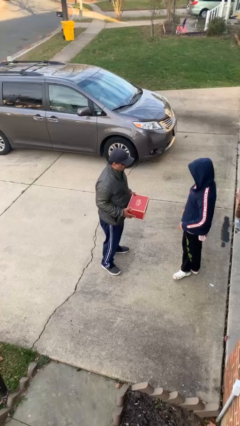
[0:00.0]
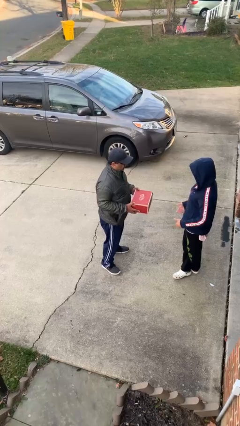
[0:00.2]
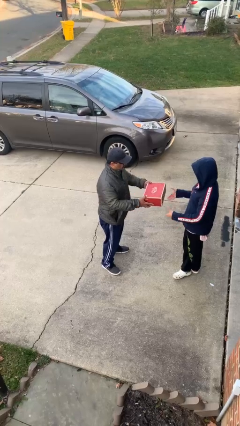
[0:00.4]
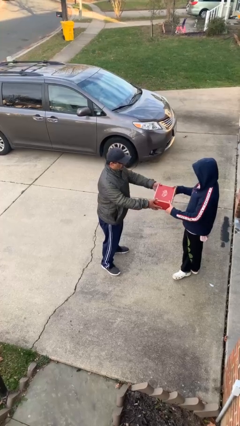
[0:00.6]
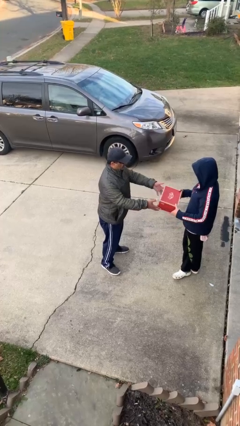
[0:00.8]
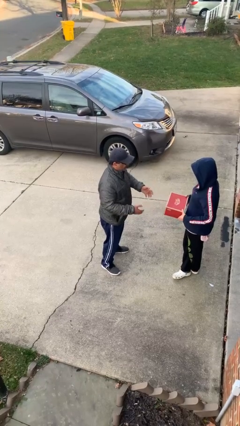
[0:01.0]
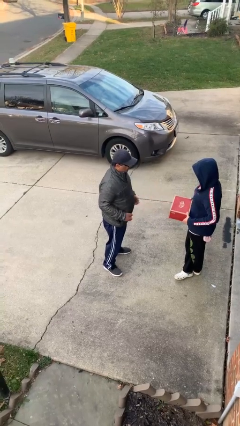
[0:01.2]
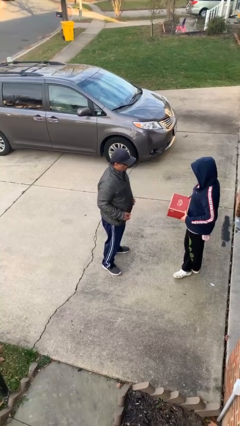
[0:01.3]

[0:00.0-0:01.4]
person transfers object to person

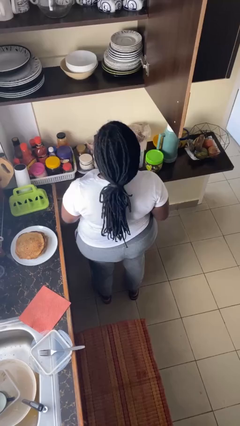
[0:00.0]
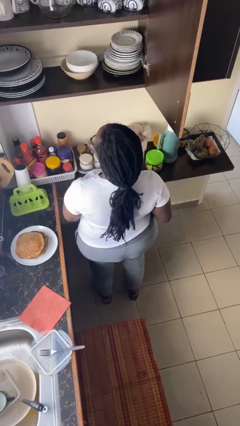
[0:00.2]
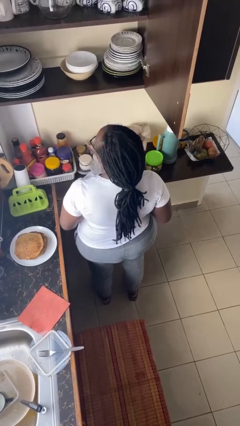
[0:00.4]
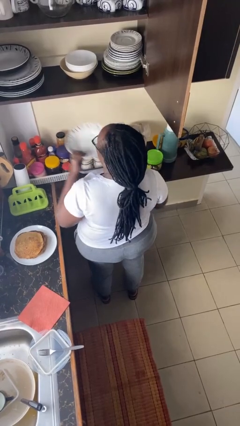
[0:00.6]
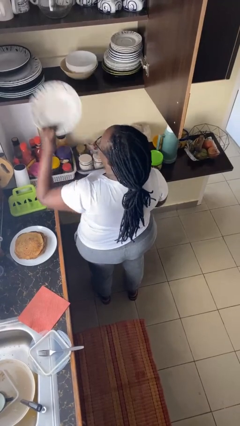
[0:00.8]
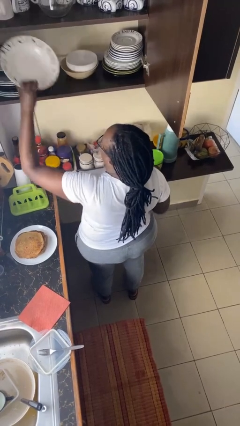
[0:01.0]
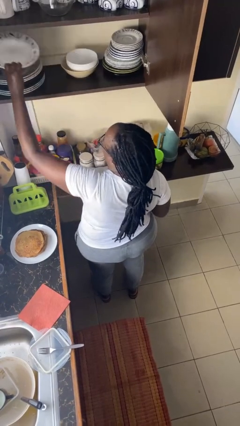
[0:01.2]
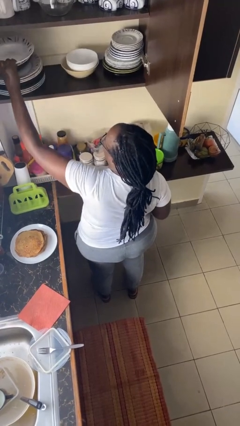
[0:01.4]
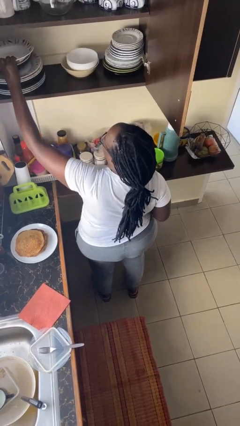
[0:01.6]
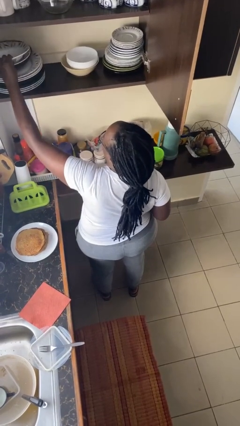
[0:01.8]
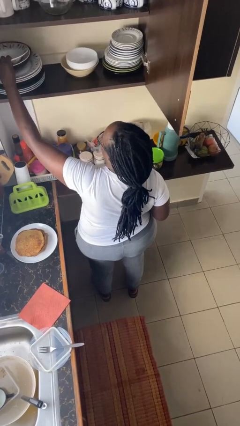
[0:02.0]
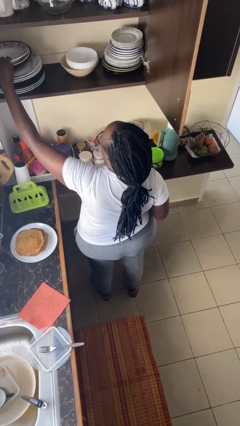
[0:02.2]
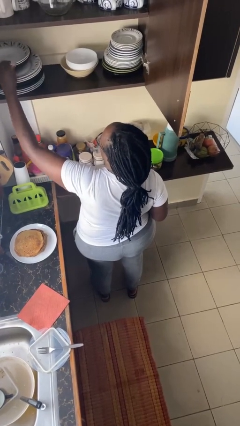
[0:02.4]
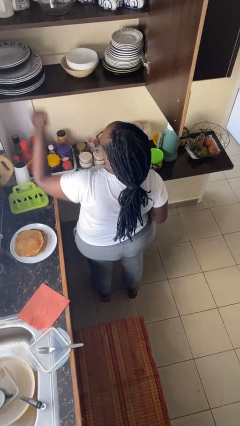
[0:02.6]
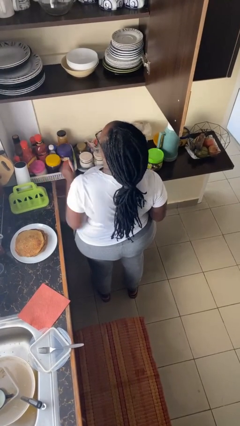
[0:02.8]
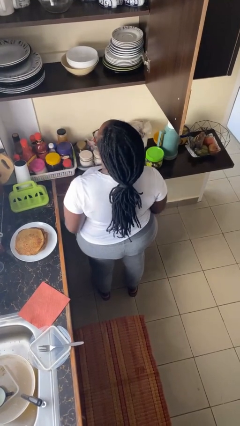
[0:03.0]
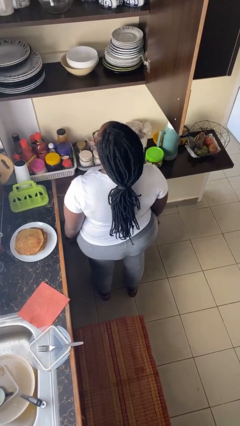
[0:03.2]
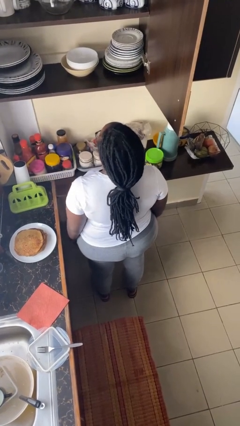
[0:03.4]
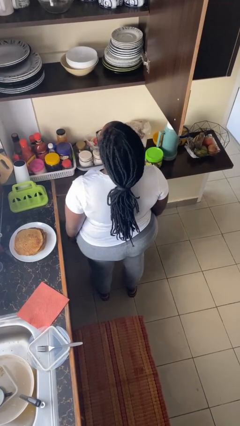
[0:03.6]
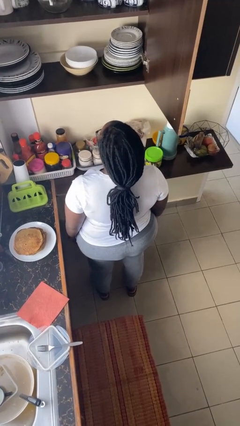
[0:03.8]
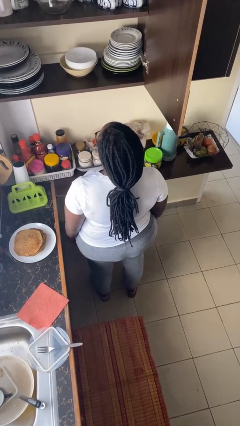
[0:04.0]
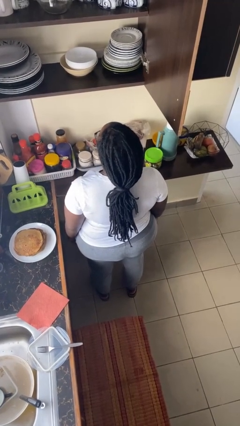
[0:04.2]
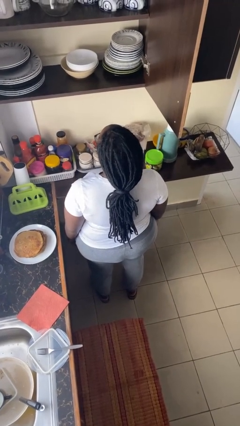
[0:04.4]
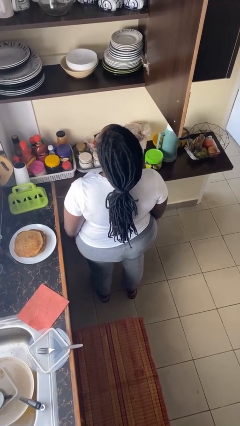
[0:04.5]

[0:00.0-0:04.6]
person puts object in cabinet

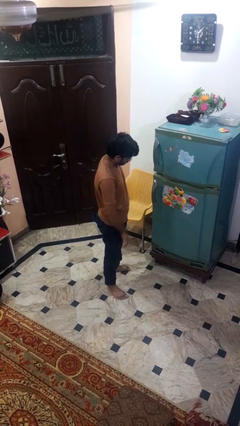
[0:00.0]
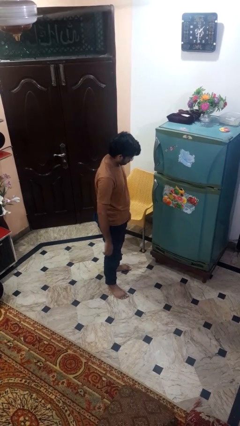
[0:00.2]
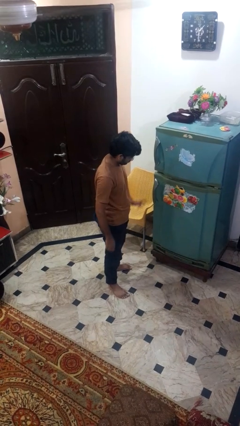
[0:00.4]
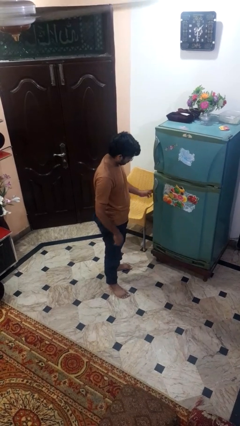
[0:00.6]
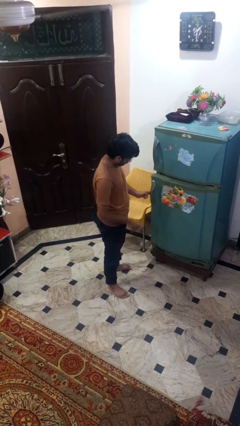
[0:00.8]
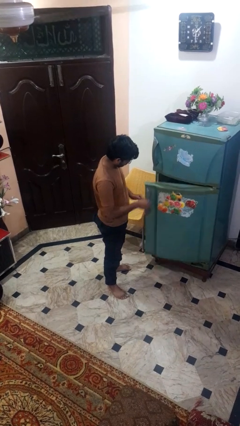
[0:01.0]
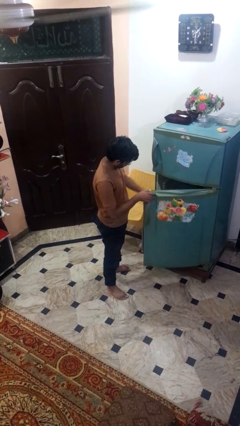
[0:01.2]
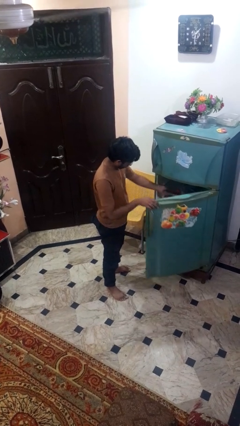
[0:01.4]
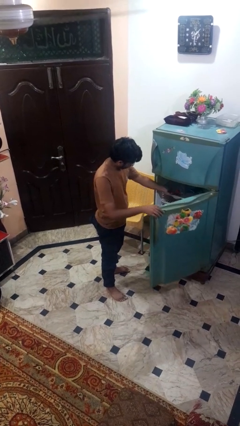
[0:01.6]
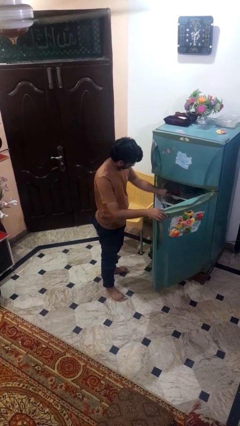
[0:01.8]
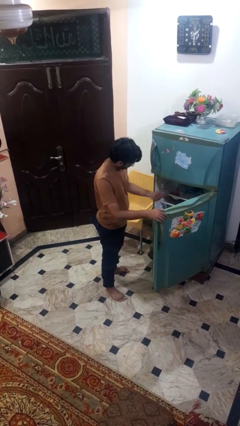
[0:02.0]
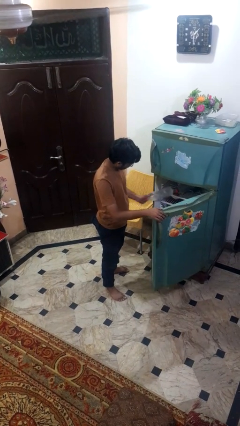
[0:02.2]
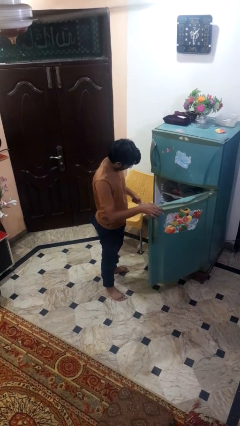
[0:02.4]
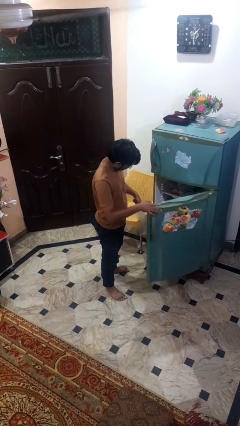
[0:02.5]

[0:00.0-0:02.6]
person takes object from refrigerator

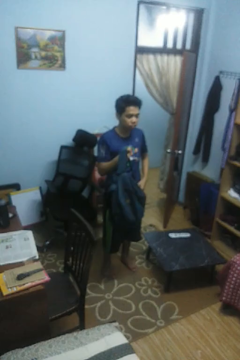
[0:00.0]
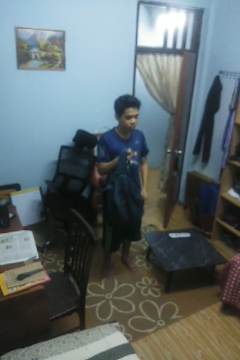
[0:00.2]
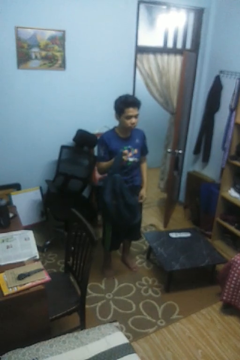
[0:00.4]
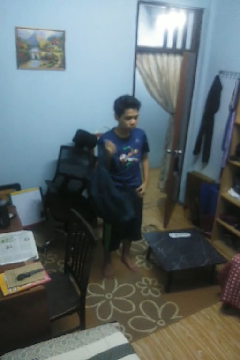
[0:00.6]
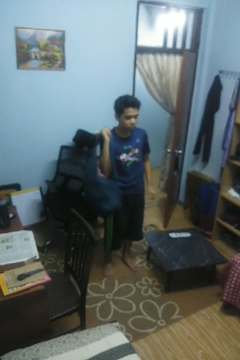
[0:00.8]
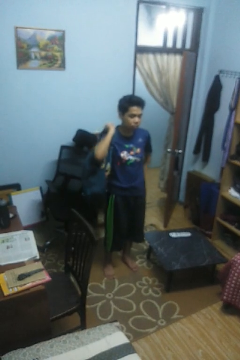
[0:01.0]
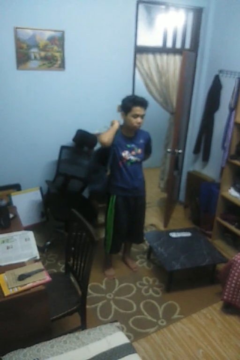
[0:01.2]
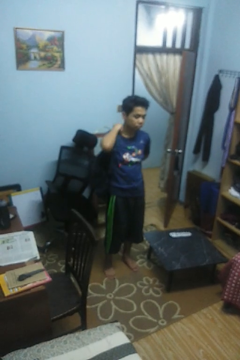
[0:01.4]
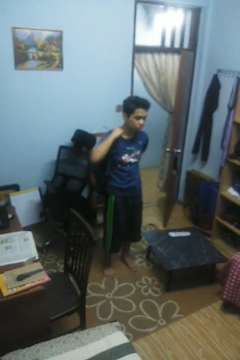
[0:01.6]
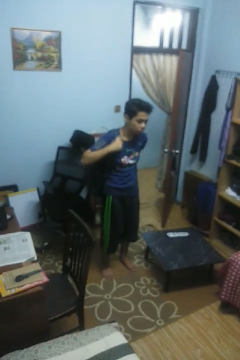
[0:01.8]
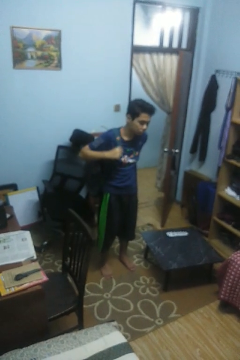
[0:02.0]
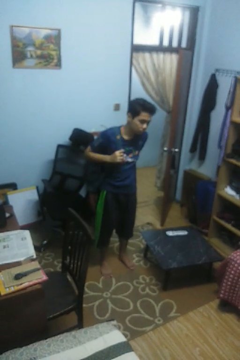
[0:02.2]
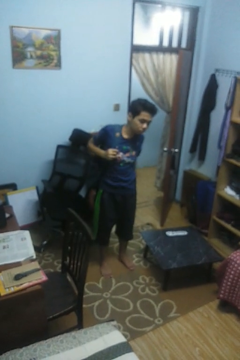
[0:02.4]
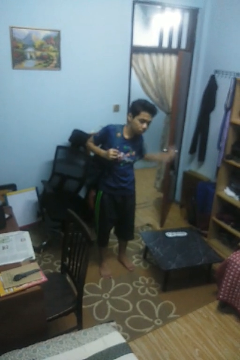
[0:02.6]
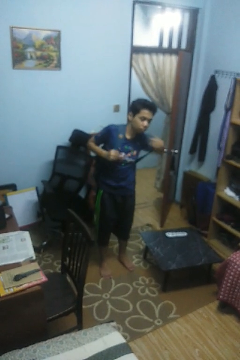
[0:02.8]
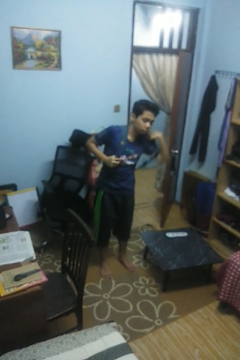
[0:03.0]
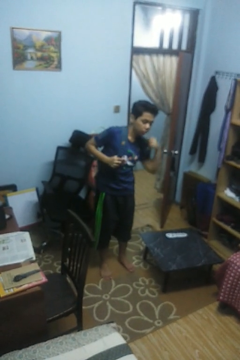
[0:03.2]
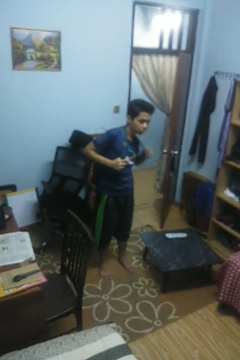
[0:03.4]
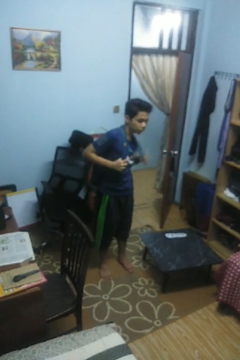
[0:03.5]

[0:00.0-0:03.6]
person puts on backpack

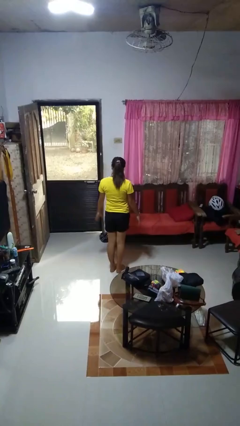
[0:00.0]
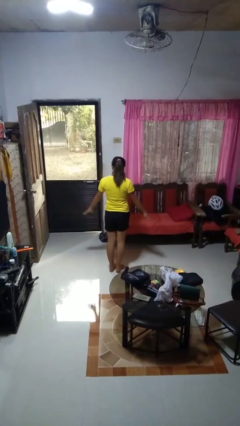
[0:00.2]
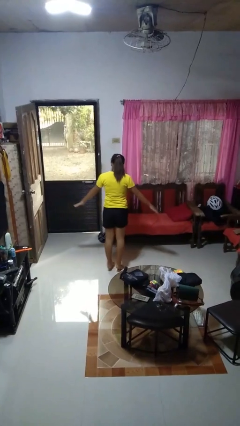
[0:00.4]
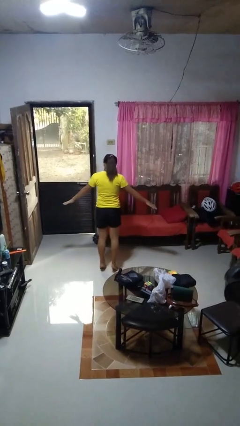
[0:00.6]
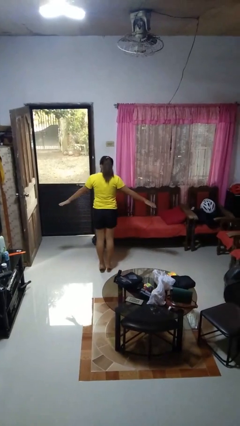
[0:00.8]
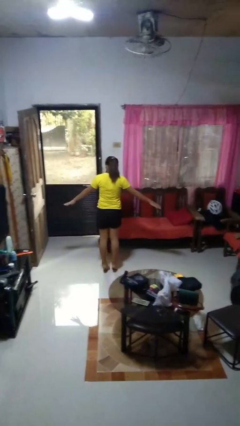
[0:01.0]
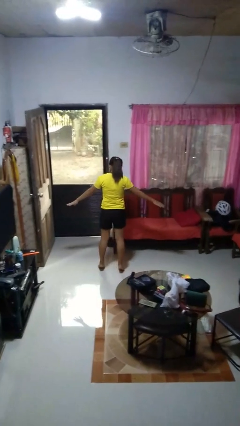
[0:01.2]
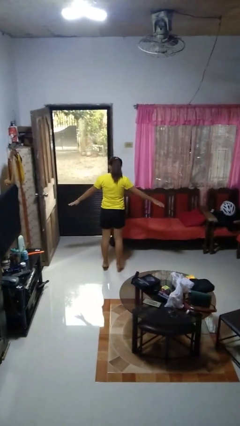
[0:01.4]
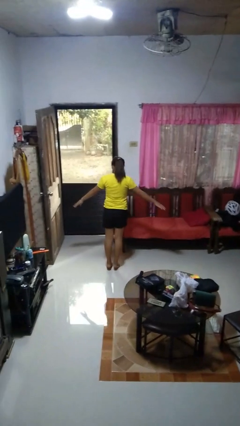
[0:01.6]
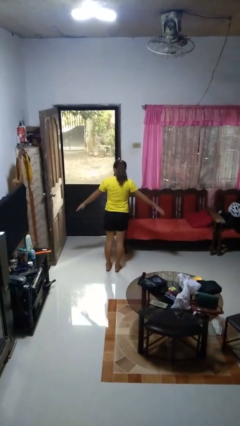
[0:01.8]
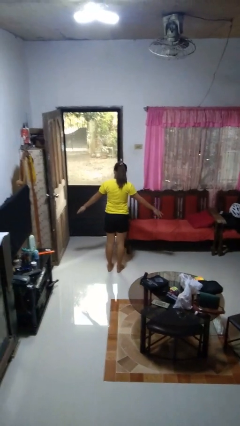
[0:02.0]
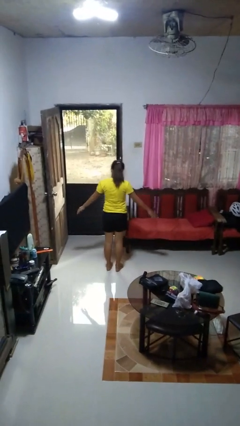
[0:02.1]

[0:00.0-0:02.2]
person walks tiptoe

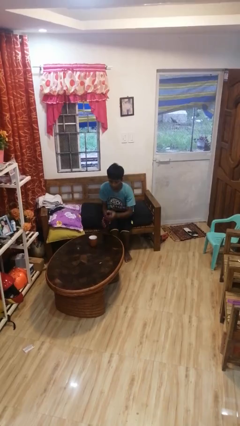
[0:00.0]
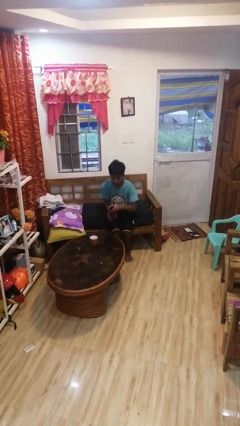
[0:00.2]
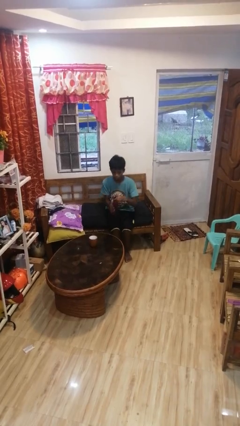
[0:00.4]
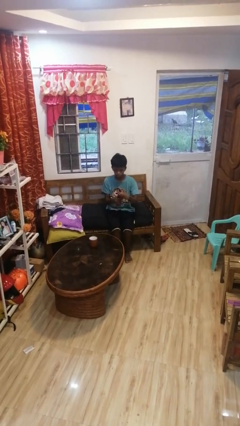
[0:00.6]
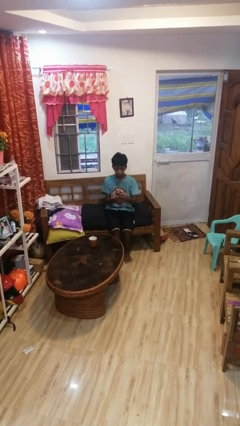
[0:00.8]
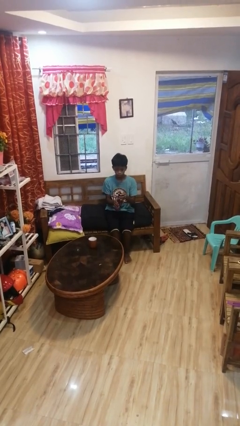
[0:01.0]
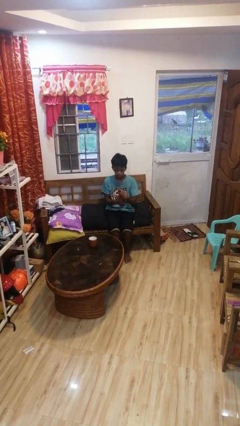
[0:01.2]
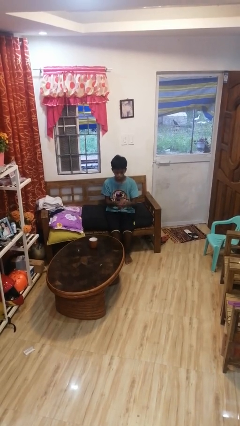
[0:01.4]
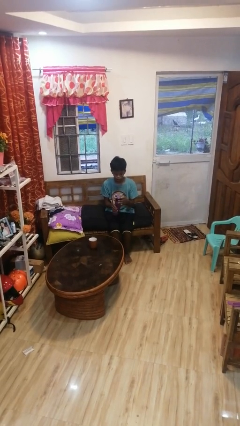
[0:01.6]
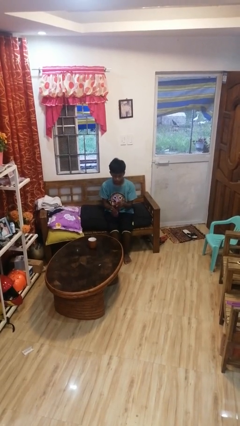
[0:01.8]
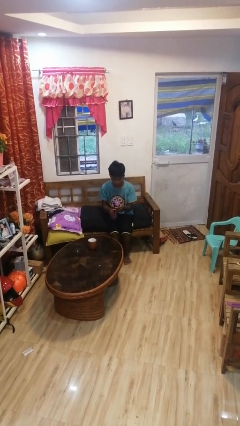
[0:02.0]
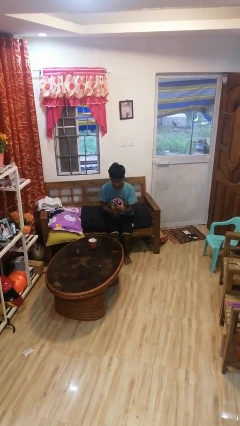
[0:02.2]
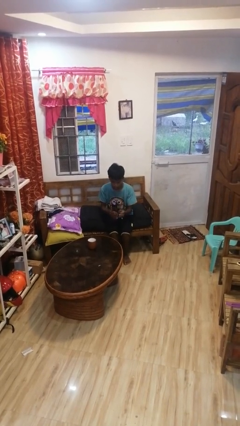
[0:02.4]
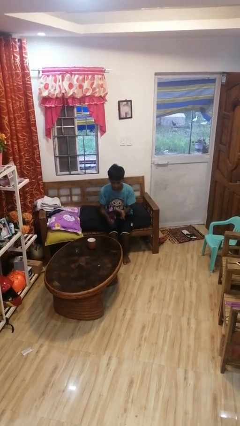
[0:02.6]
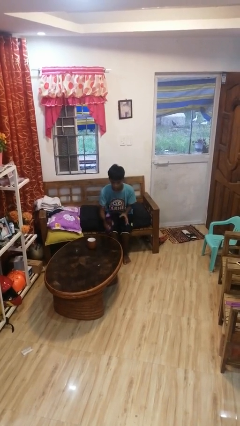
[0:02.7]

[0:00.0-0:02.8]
person screws lid to bottle

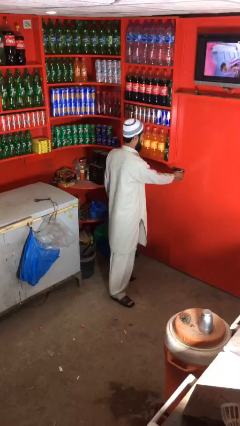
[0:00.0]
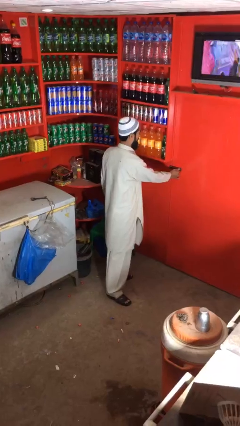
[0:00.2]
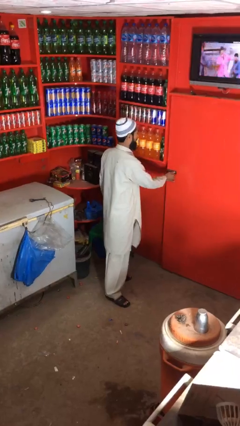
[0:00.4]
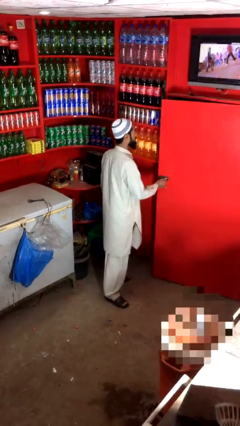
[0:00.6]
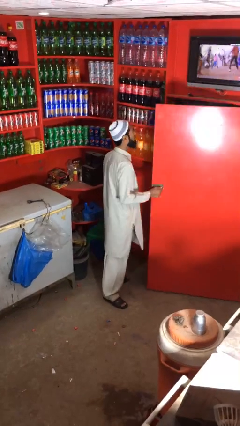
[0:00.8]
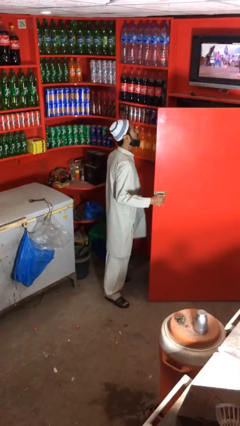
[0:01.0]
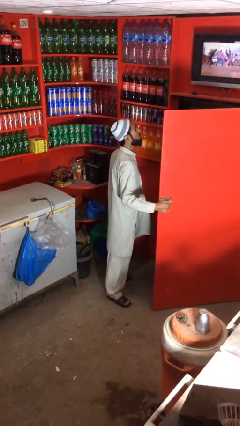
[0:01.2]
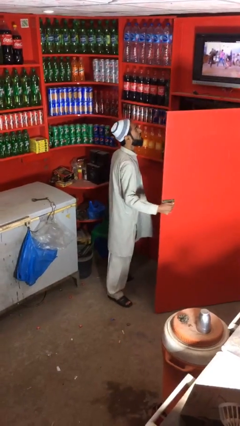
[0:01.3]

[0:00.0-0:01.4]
person opens facility door
